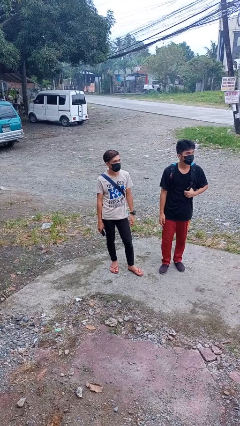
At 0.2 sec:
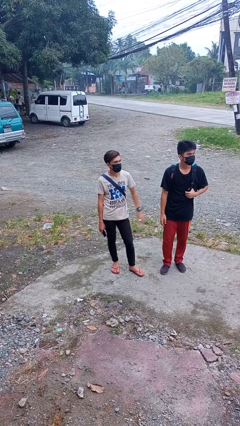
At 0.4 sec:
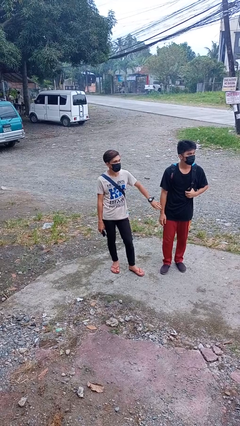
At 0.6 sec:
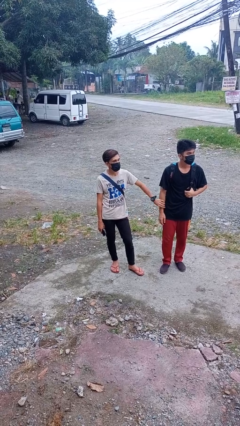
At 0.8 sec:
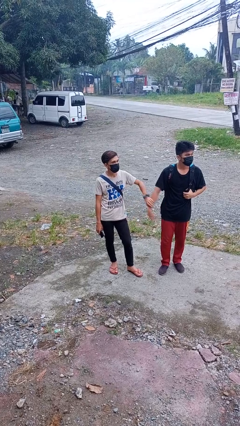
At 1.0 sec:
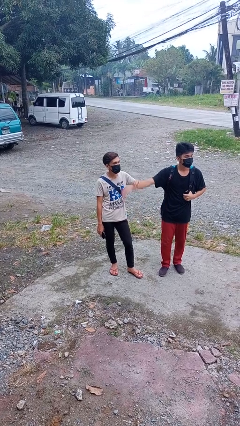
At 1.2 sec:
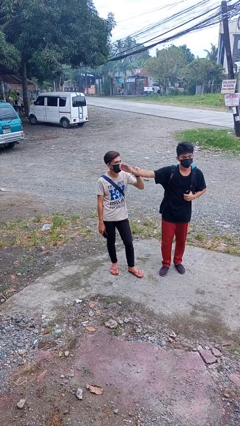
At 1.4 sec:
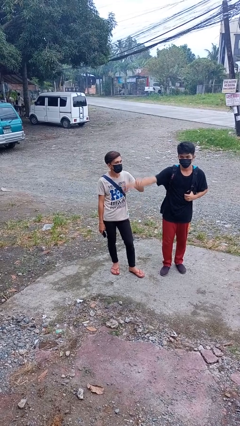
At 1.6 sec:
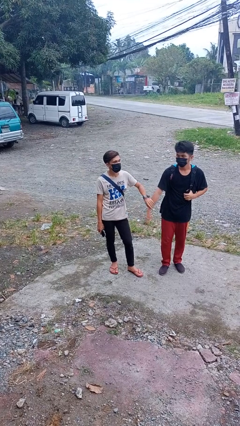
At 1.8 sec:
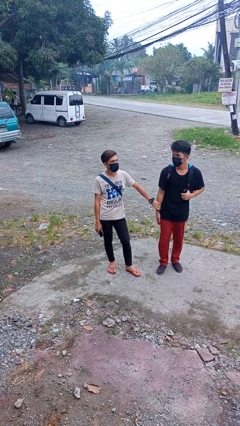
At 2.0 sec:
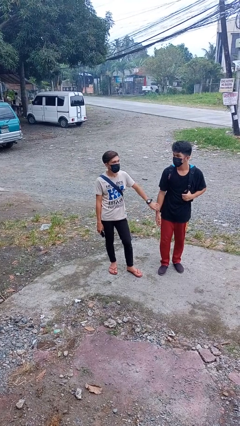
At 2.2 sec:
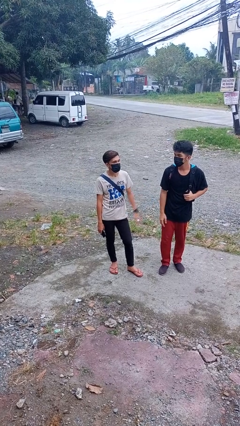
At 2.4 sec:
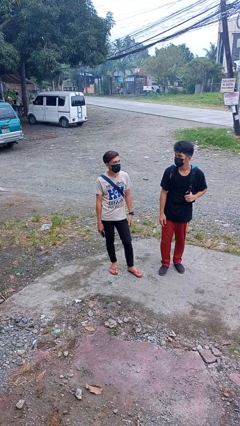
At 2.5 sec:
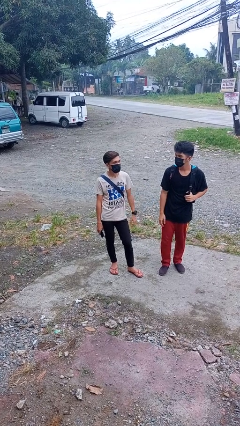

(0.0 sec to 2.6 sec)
person grabs person by forearm

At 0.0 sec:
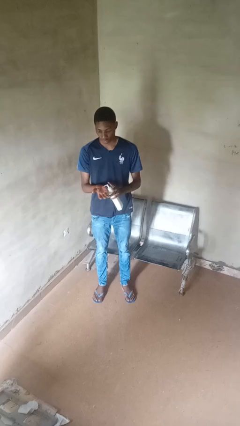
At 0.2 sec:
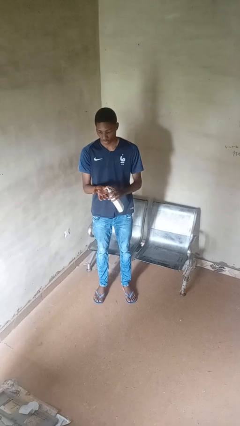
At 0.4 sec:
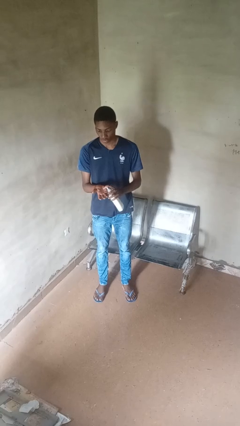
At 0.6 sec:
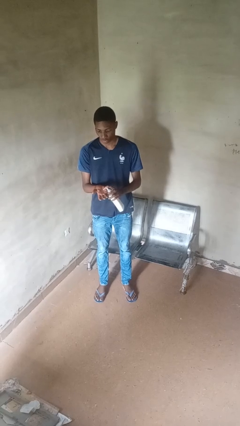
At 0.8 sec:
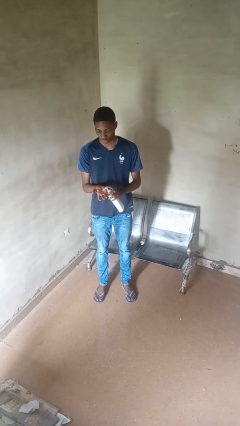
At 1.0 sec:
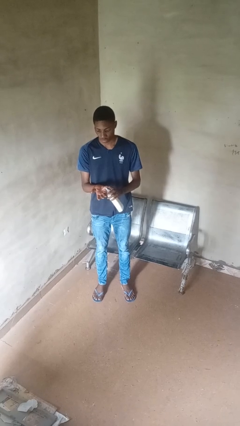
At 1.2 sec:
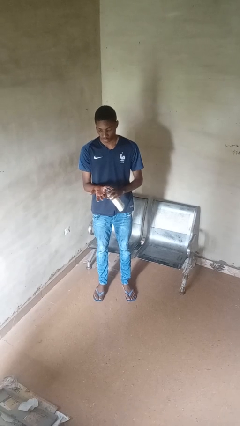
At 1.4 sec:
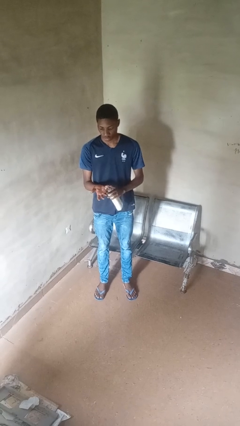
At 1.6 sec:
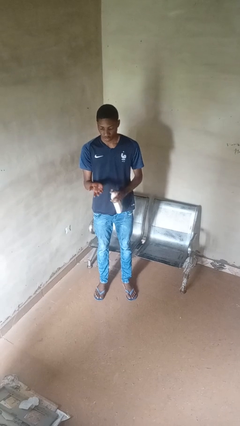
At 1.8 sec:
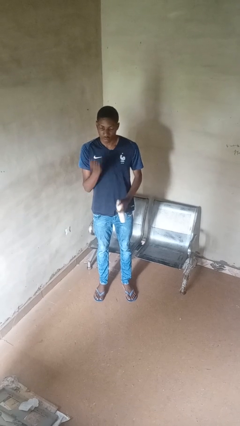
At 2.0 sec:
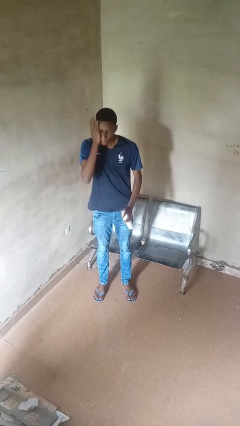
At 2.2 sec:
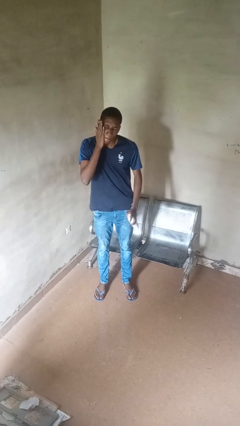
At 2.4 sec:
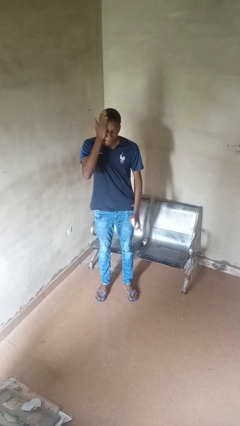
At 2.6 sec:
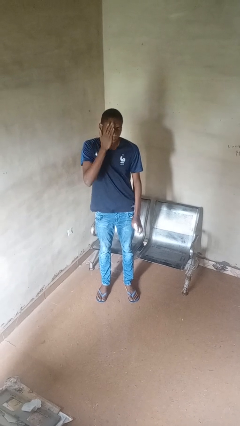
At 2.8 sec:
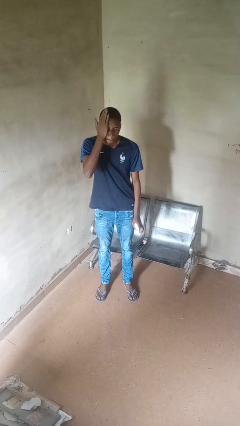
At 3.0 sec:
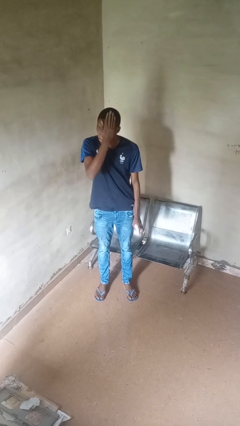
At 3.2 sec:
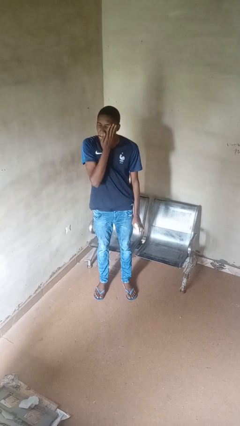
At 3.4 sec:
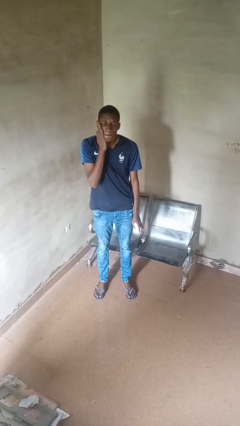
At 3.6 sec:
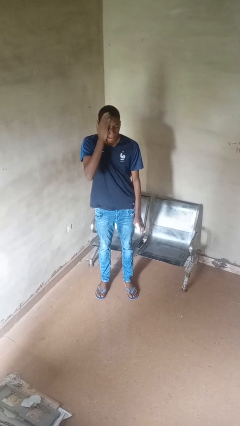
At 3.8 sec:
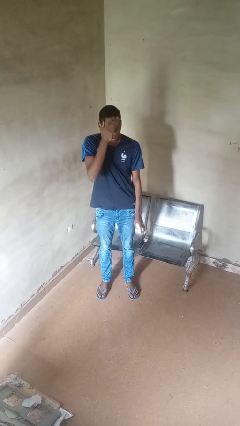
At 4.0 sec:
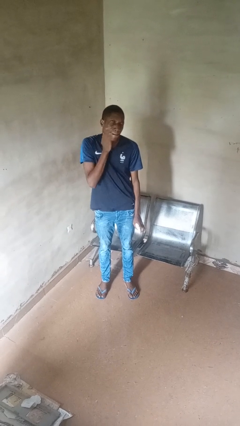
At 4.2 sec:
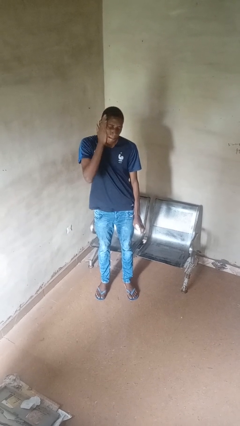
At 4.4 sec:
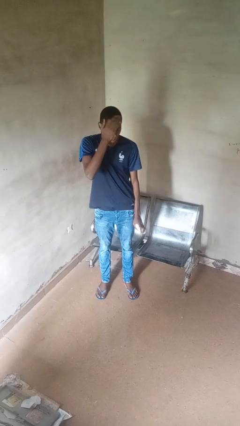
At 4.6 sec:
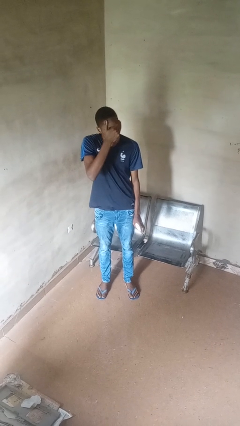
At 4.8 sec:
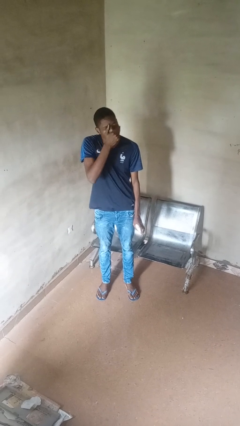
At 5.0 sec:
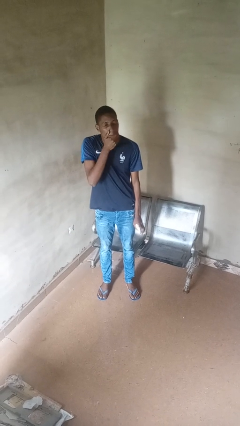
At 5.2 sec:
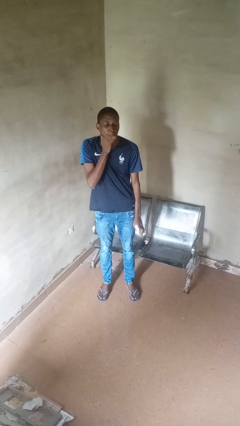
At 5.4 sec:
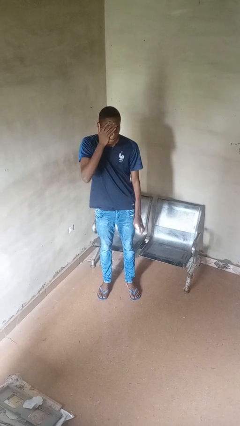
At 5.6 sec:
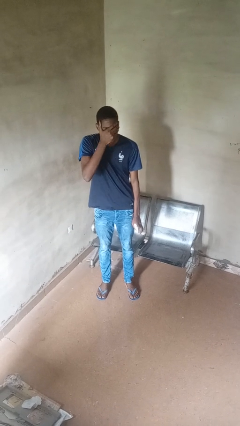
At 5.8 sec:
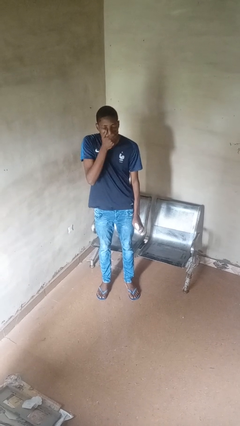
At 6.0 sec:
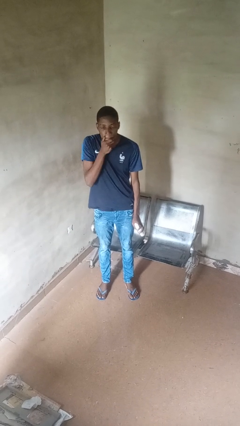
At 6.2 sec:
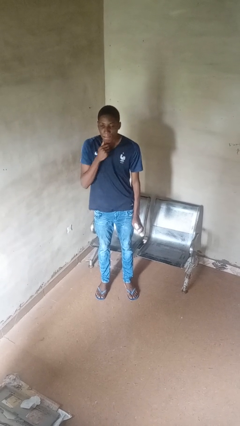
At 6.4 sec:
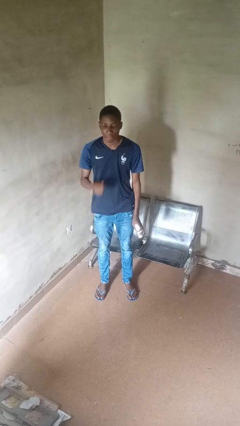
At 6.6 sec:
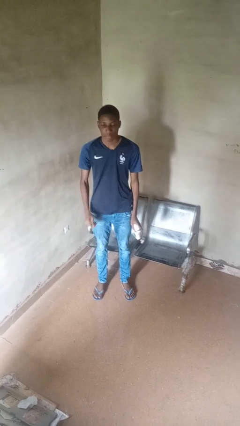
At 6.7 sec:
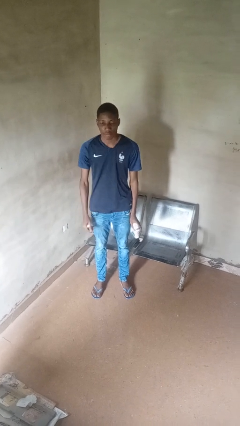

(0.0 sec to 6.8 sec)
person applies facial moisturizer

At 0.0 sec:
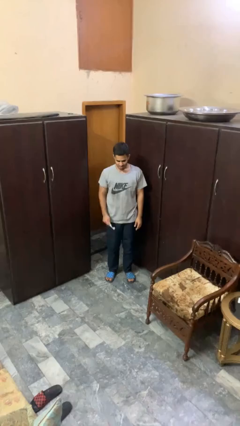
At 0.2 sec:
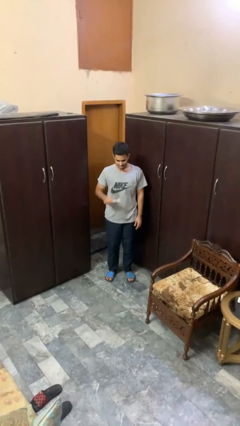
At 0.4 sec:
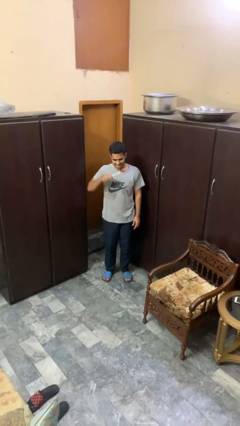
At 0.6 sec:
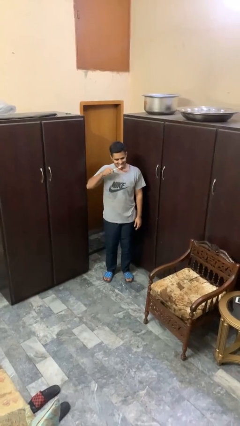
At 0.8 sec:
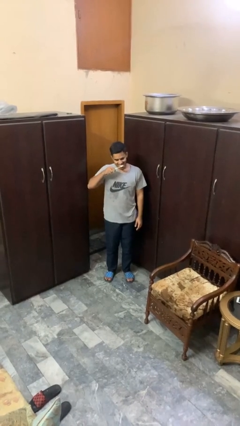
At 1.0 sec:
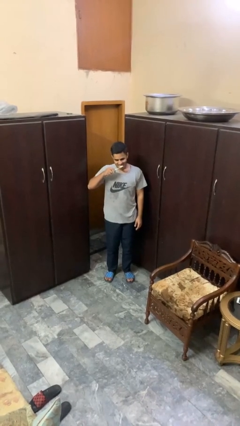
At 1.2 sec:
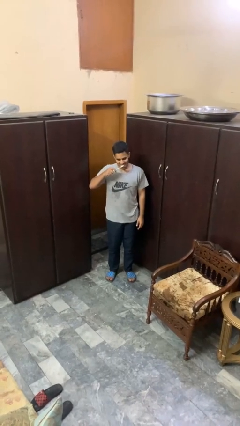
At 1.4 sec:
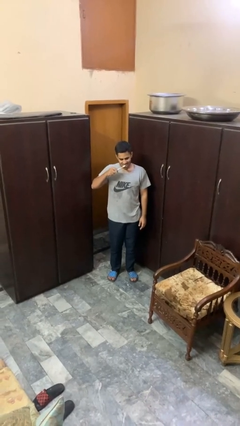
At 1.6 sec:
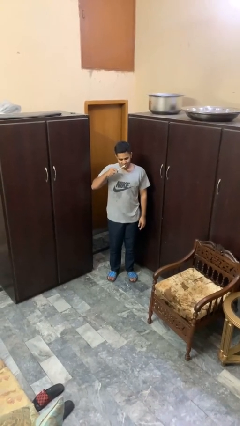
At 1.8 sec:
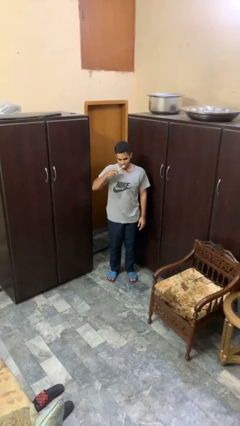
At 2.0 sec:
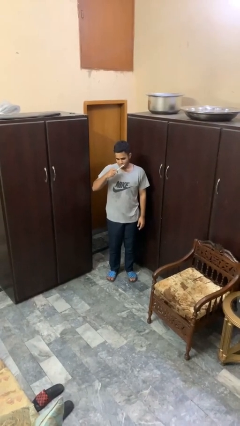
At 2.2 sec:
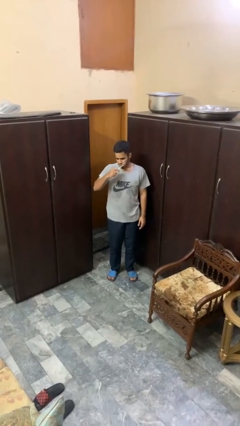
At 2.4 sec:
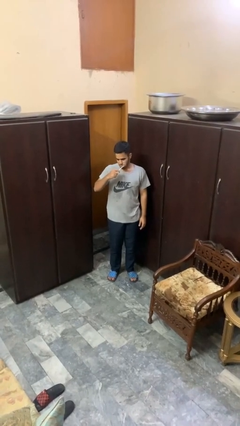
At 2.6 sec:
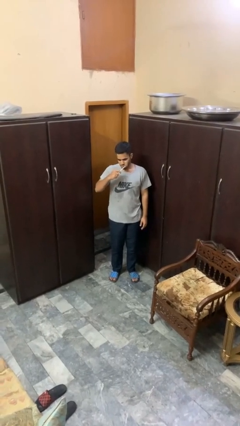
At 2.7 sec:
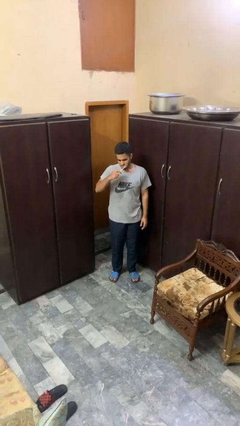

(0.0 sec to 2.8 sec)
person brushes teeth

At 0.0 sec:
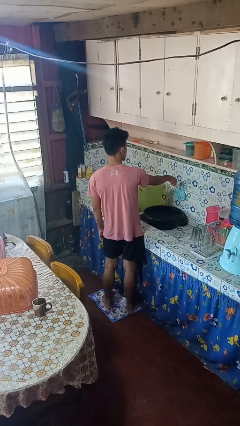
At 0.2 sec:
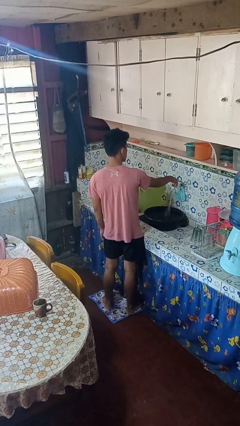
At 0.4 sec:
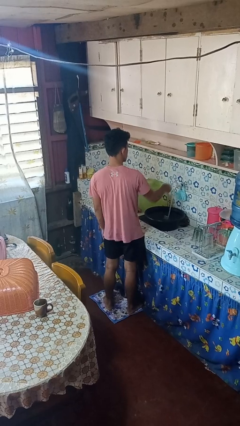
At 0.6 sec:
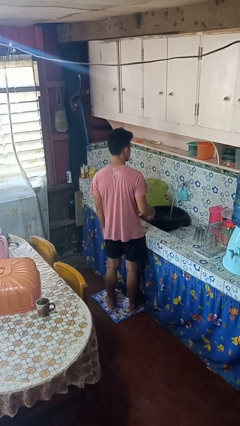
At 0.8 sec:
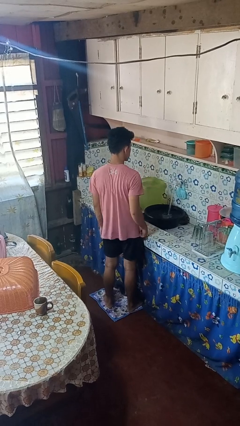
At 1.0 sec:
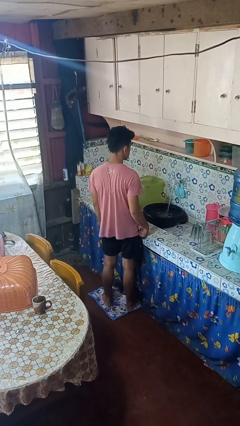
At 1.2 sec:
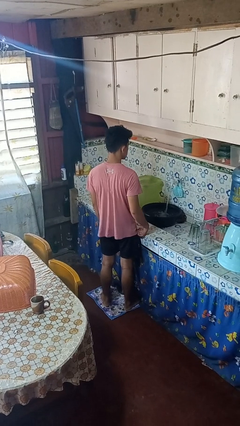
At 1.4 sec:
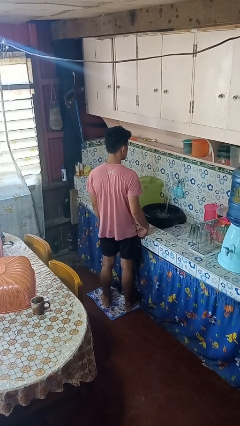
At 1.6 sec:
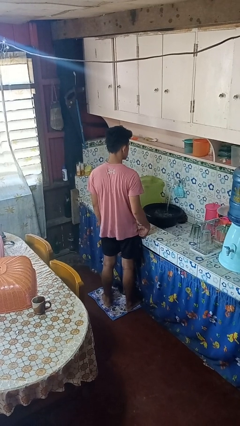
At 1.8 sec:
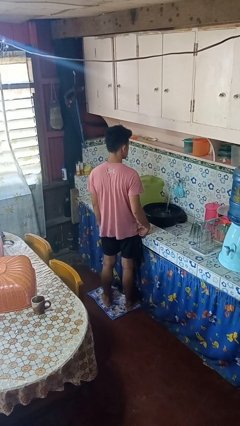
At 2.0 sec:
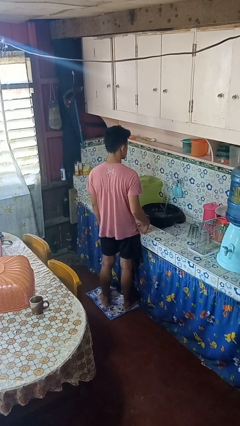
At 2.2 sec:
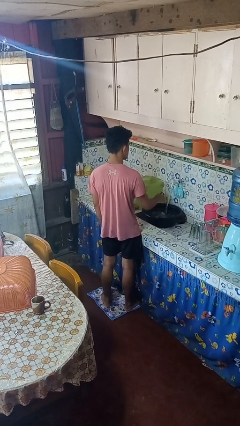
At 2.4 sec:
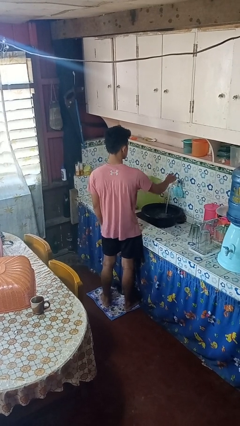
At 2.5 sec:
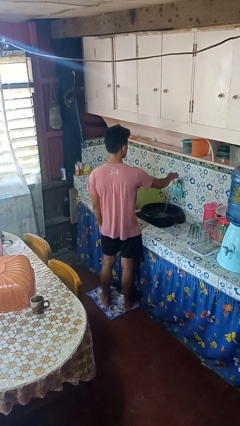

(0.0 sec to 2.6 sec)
person turns on faucet

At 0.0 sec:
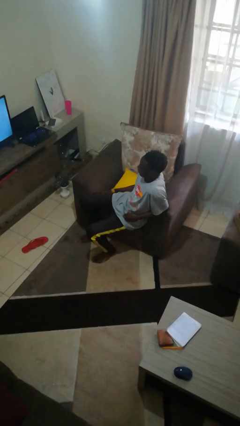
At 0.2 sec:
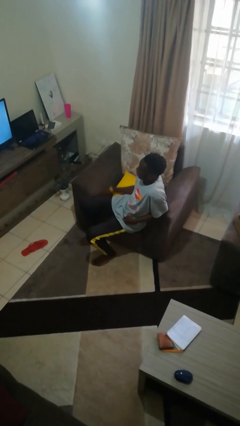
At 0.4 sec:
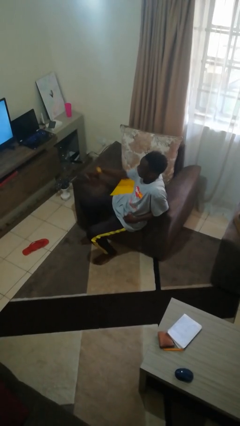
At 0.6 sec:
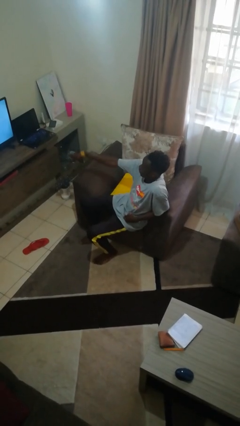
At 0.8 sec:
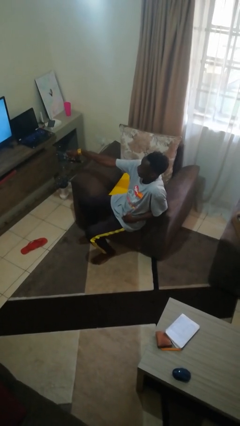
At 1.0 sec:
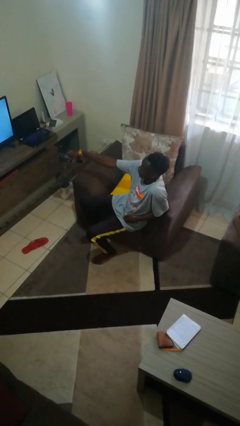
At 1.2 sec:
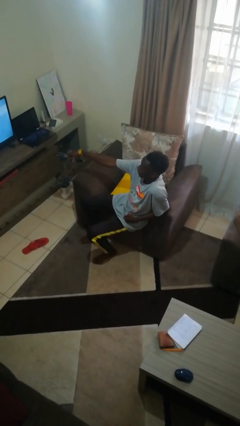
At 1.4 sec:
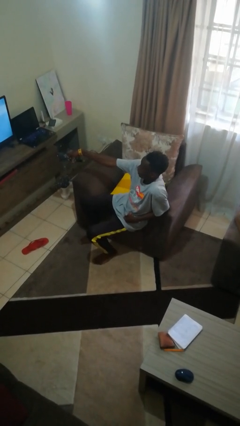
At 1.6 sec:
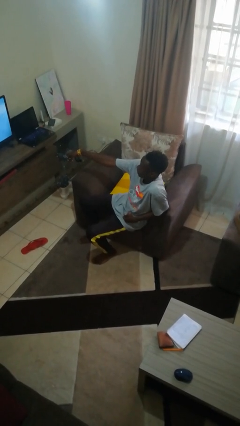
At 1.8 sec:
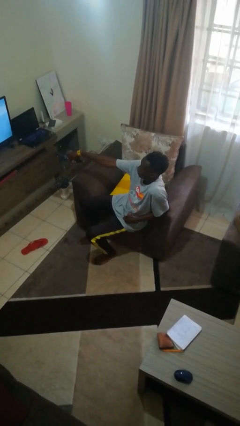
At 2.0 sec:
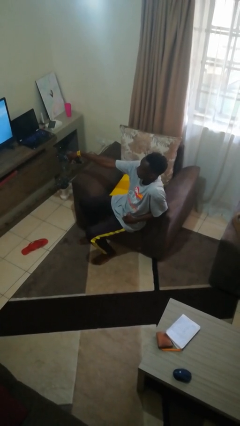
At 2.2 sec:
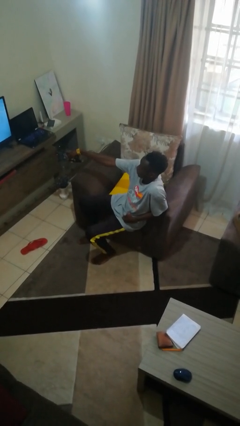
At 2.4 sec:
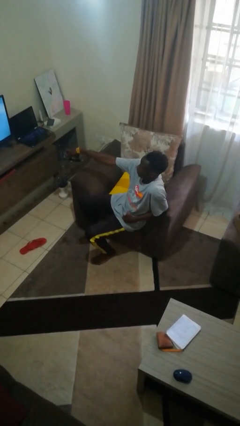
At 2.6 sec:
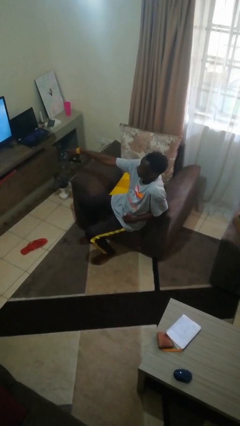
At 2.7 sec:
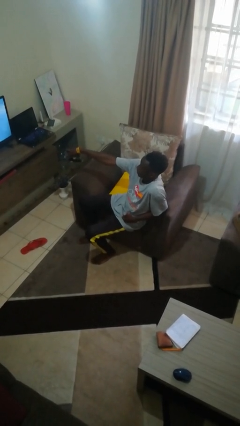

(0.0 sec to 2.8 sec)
person uses television remote
